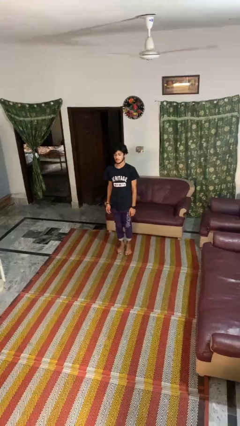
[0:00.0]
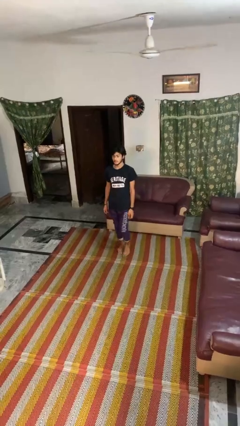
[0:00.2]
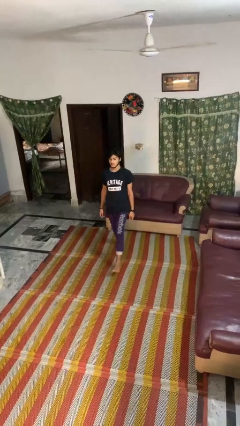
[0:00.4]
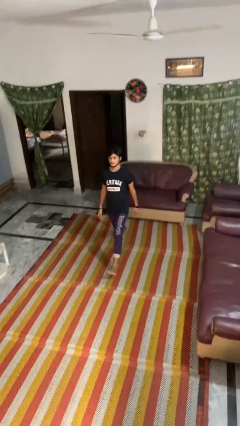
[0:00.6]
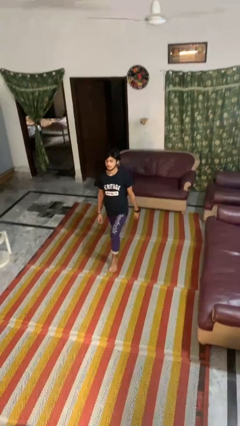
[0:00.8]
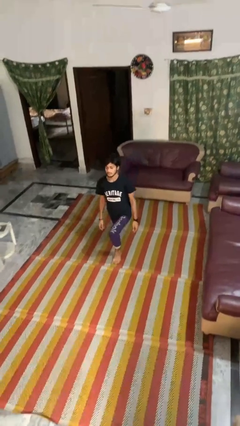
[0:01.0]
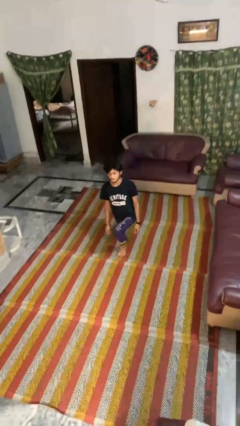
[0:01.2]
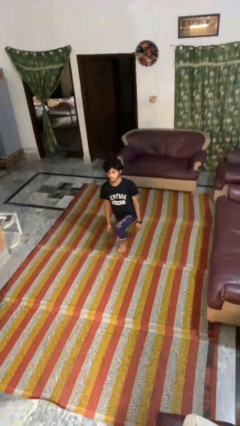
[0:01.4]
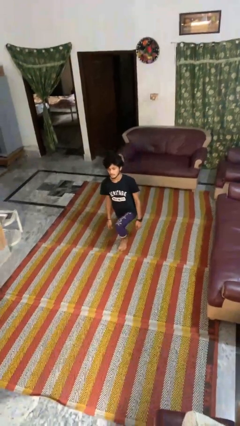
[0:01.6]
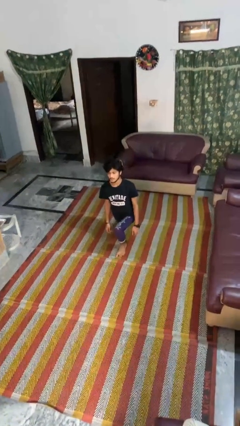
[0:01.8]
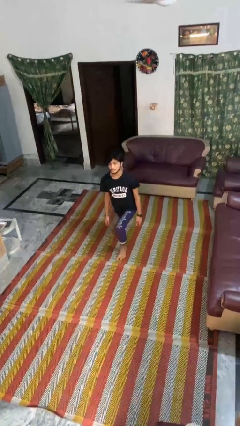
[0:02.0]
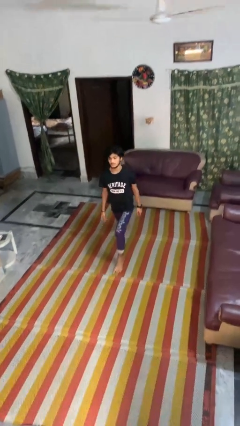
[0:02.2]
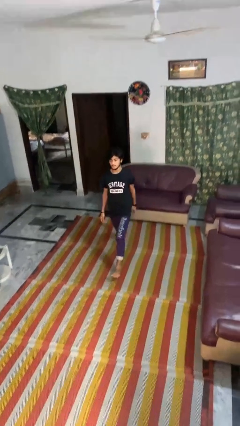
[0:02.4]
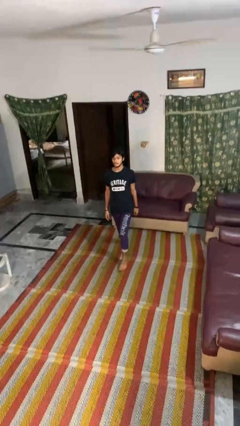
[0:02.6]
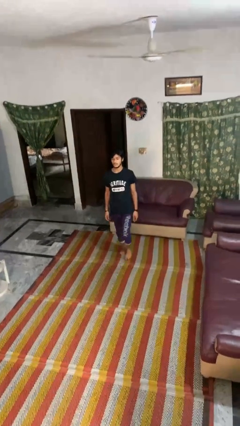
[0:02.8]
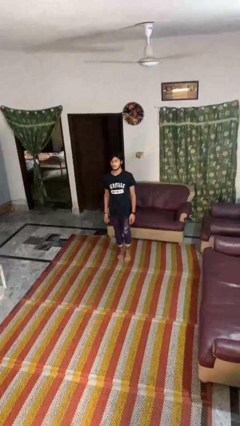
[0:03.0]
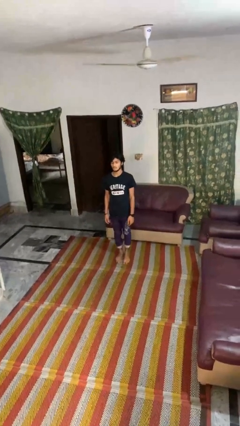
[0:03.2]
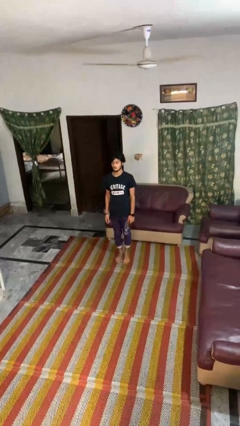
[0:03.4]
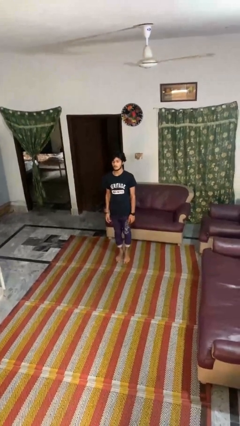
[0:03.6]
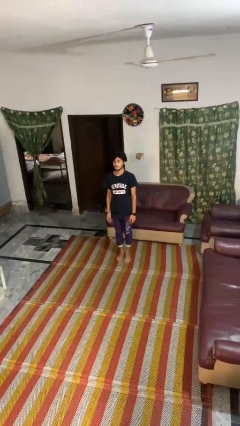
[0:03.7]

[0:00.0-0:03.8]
person exercises with lunges

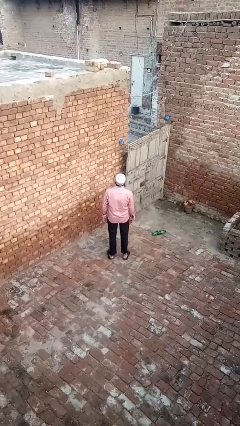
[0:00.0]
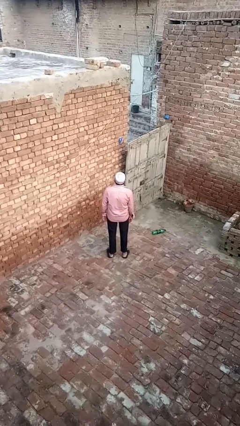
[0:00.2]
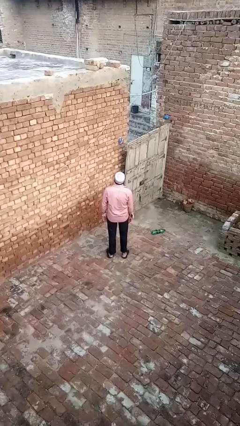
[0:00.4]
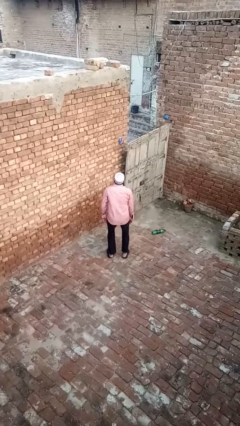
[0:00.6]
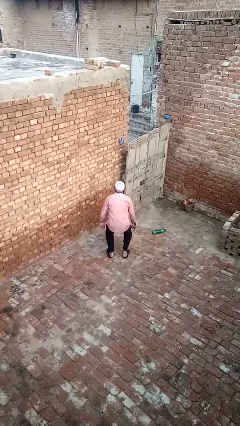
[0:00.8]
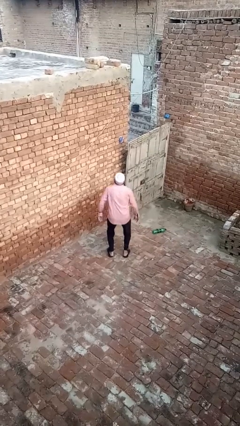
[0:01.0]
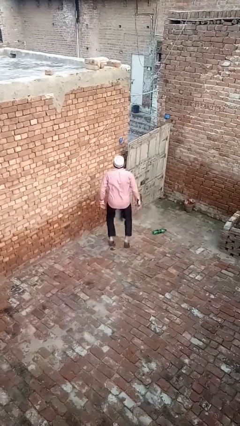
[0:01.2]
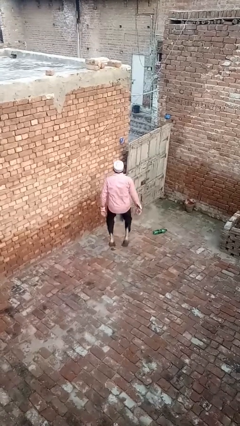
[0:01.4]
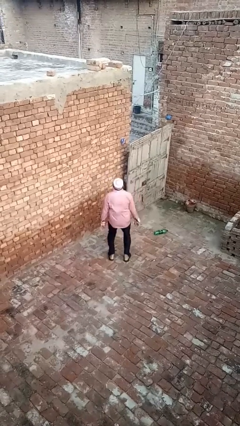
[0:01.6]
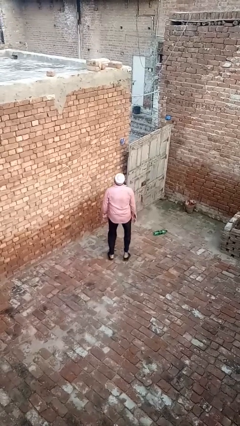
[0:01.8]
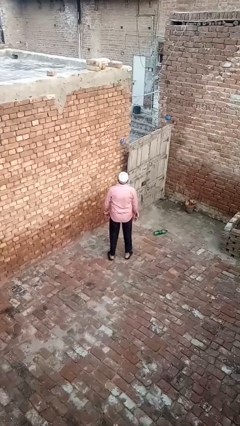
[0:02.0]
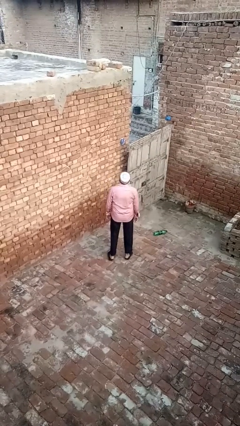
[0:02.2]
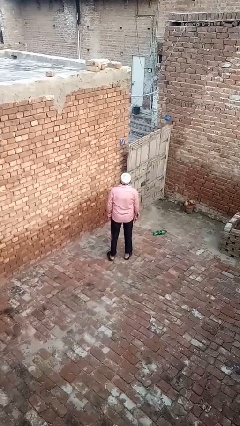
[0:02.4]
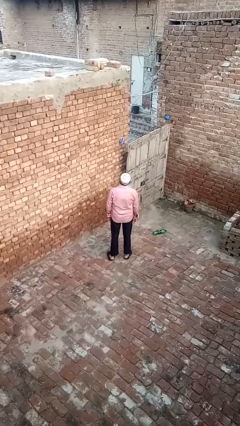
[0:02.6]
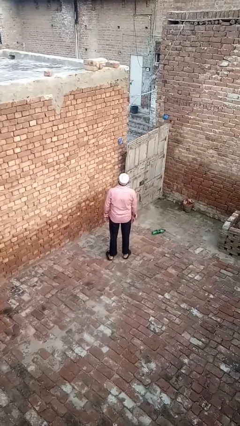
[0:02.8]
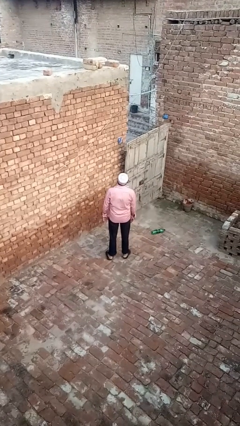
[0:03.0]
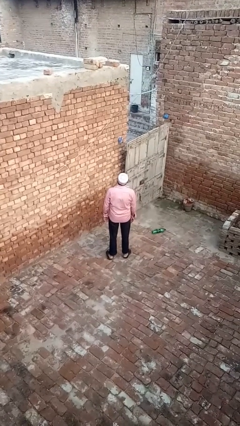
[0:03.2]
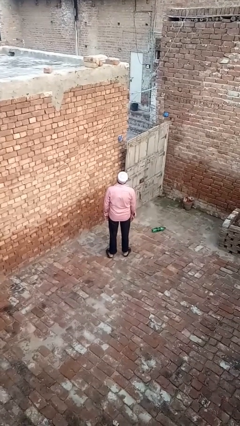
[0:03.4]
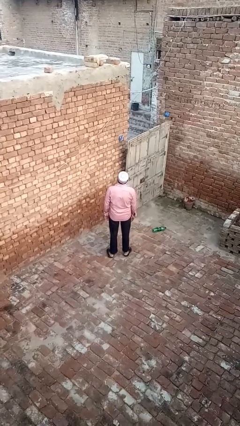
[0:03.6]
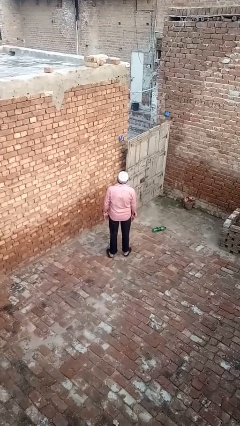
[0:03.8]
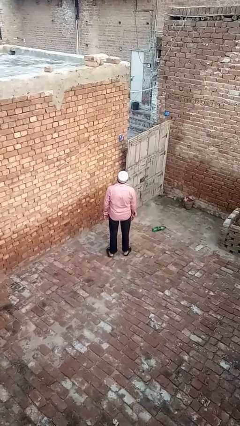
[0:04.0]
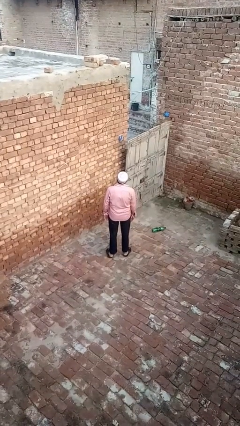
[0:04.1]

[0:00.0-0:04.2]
person jumps

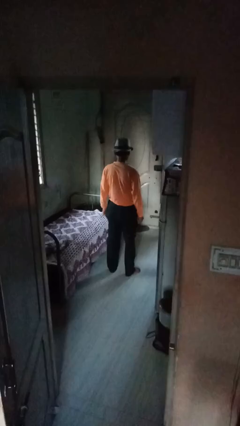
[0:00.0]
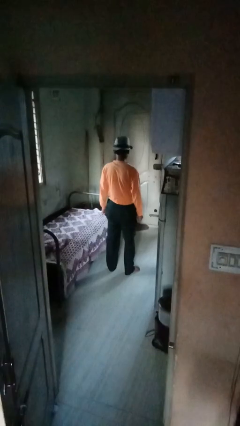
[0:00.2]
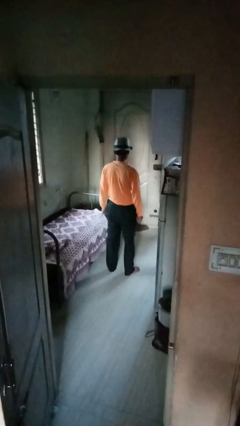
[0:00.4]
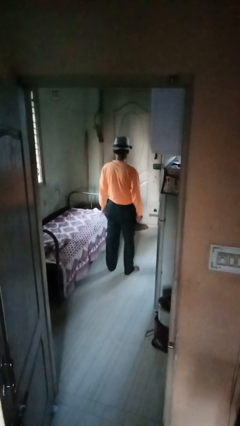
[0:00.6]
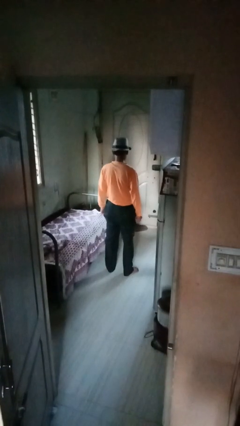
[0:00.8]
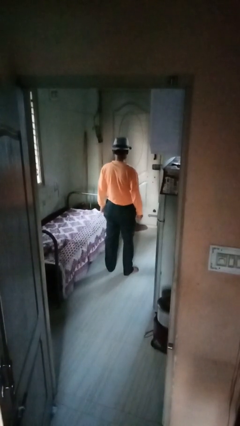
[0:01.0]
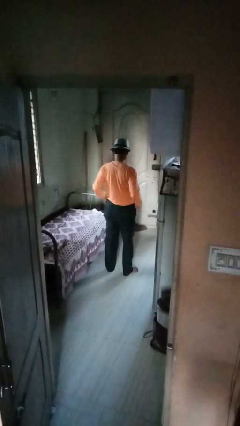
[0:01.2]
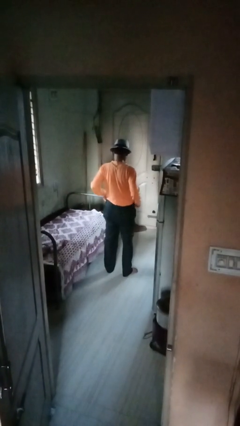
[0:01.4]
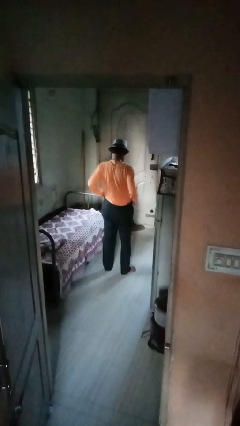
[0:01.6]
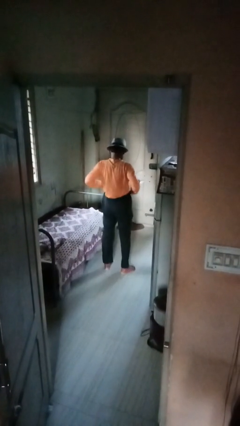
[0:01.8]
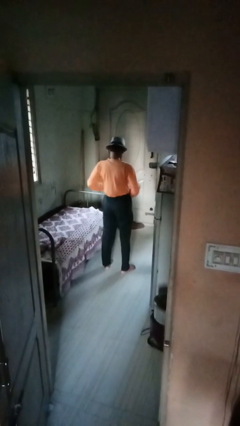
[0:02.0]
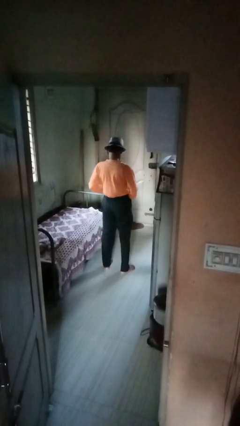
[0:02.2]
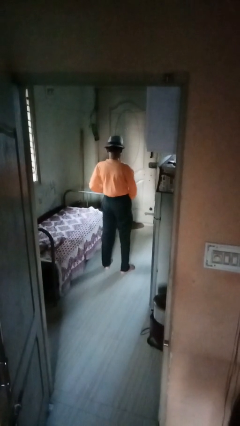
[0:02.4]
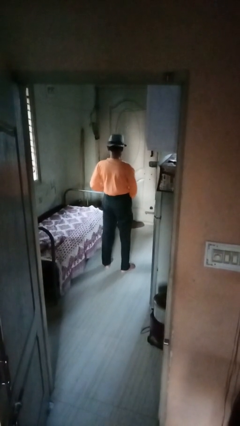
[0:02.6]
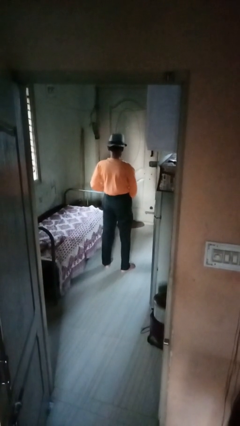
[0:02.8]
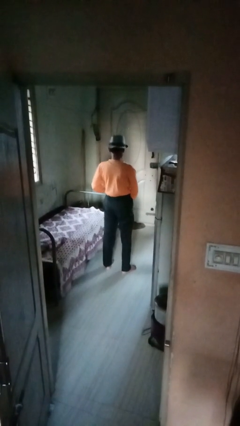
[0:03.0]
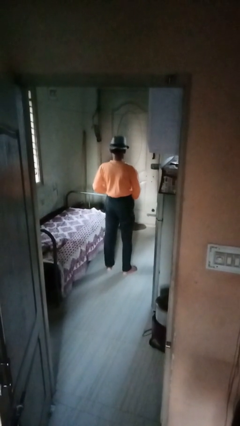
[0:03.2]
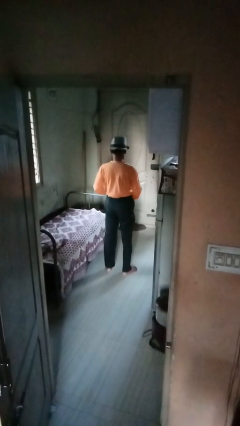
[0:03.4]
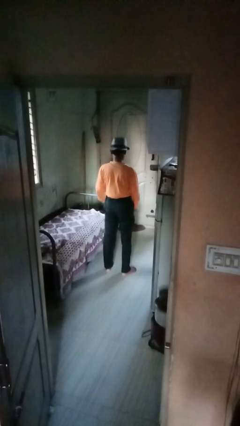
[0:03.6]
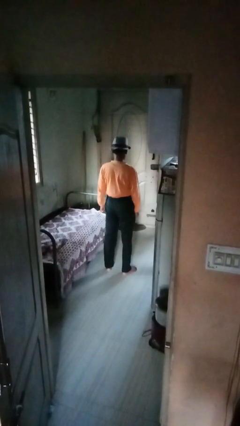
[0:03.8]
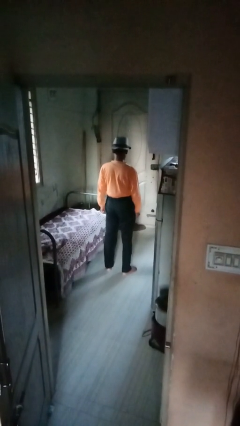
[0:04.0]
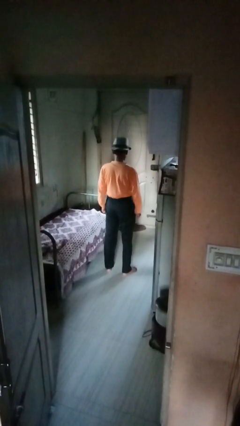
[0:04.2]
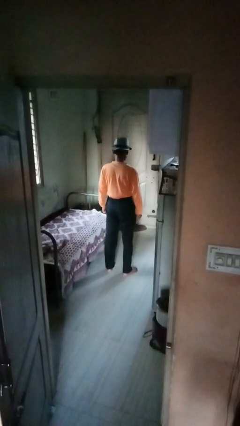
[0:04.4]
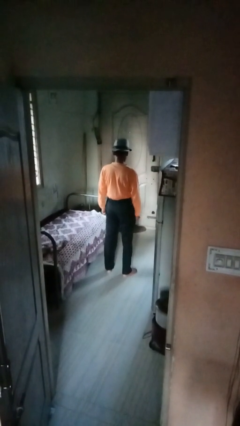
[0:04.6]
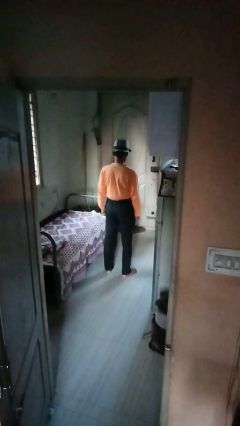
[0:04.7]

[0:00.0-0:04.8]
person hikes up pants

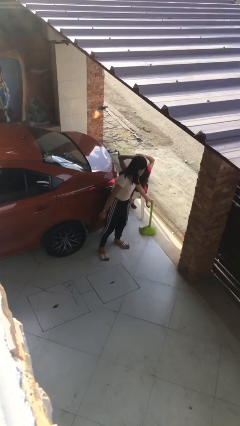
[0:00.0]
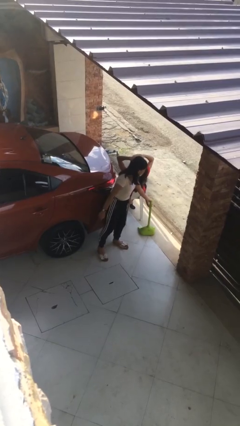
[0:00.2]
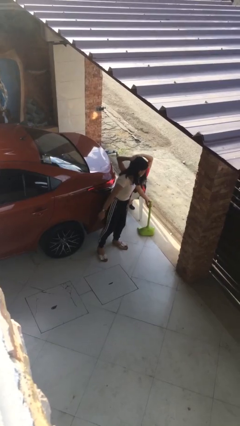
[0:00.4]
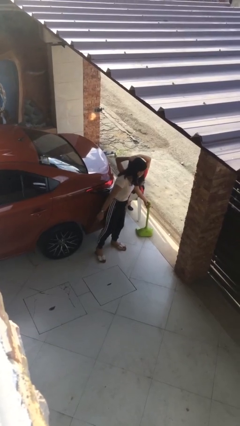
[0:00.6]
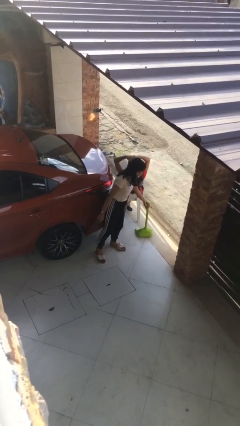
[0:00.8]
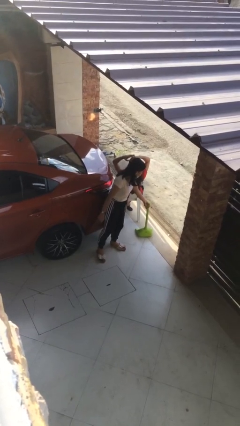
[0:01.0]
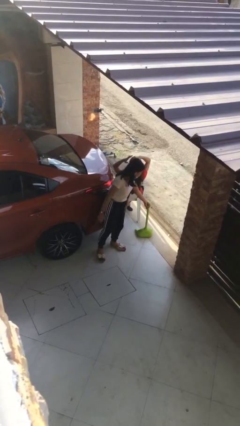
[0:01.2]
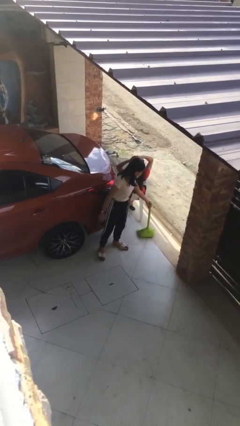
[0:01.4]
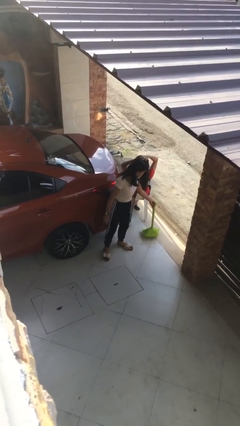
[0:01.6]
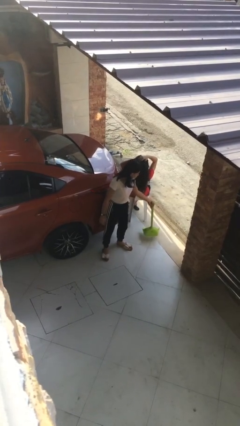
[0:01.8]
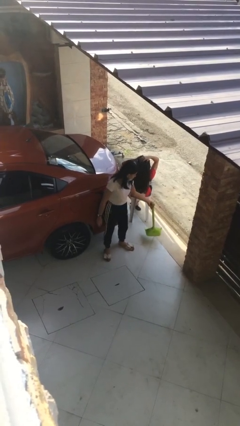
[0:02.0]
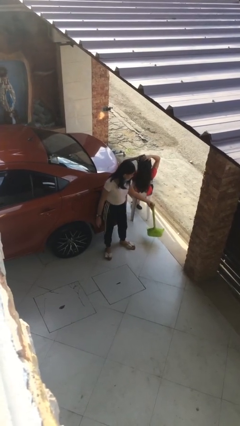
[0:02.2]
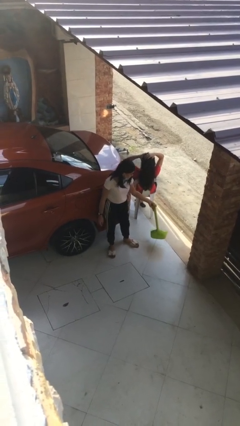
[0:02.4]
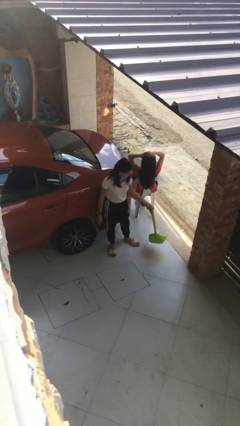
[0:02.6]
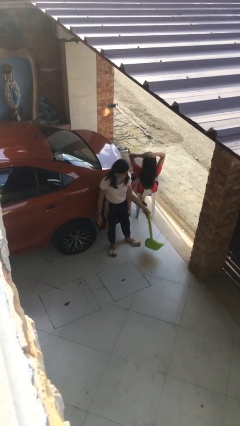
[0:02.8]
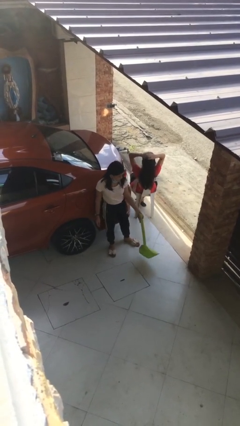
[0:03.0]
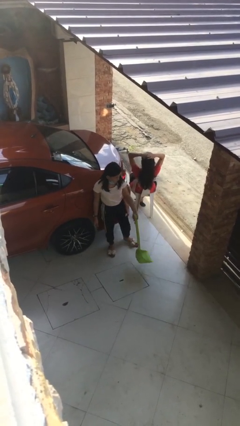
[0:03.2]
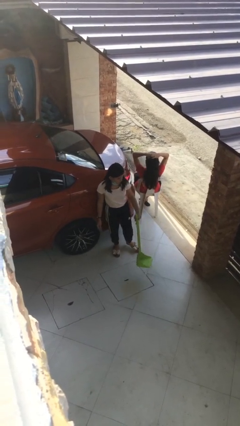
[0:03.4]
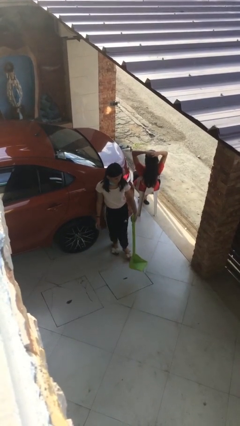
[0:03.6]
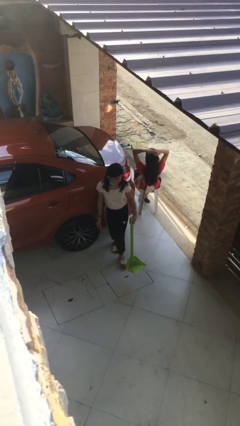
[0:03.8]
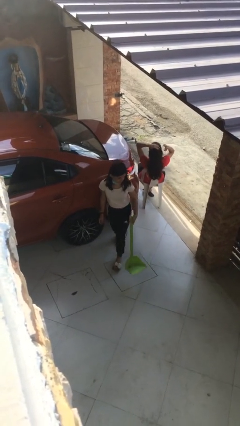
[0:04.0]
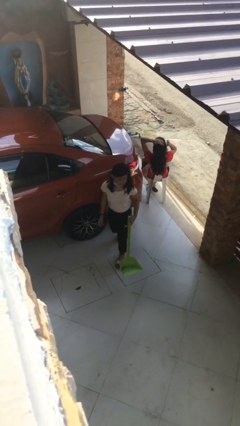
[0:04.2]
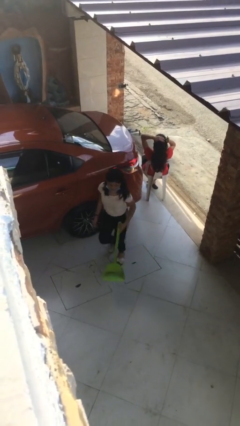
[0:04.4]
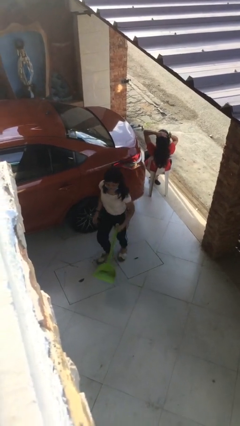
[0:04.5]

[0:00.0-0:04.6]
person steals object from person

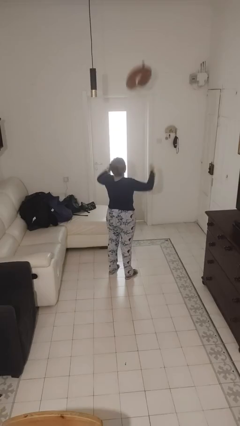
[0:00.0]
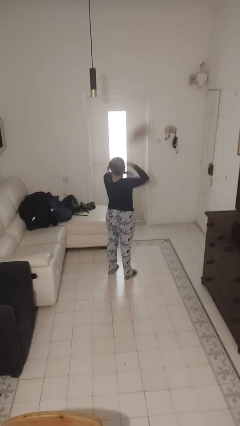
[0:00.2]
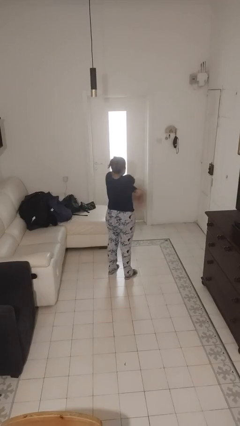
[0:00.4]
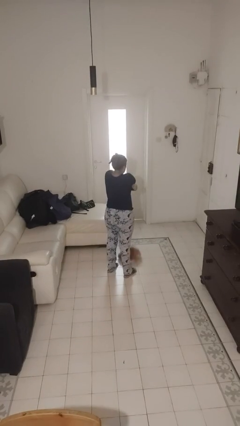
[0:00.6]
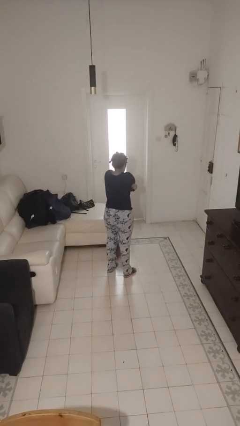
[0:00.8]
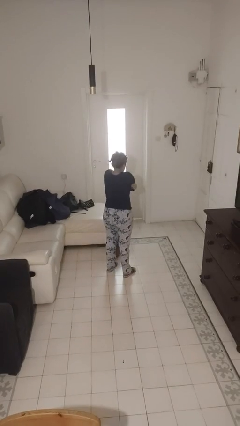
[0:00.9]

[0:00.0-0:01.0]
person catches dropped object
